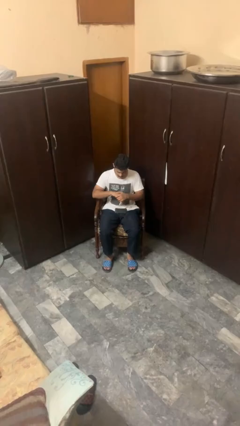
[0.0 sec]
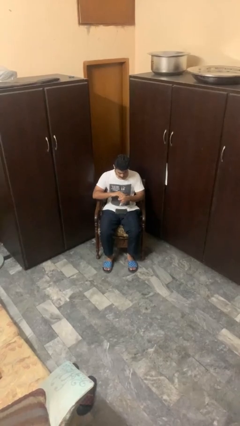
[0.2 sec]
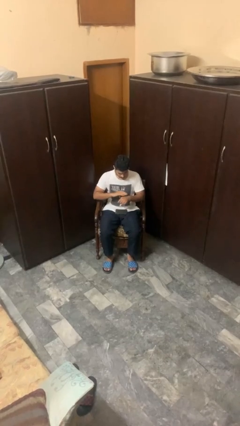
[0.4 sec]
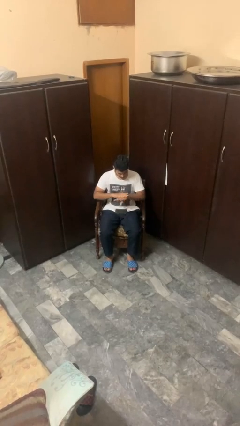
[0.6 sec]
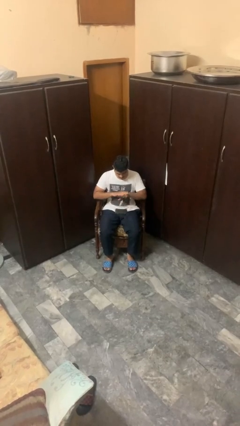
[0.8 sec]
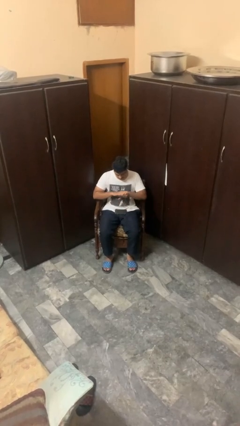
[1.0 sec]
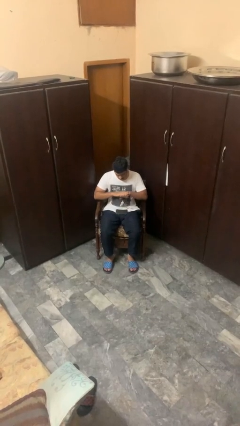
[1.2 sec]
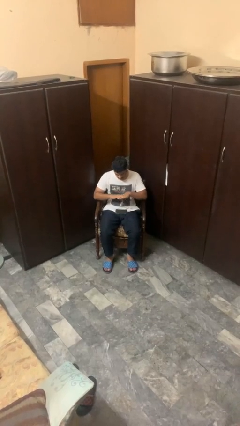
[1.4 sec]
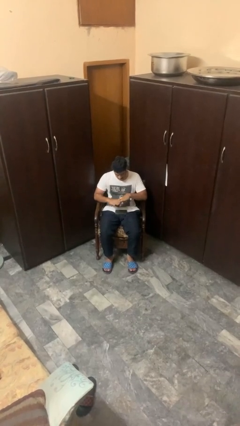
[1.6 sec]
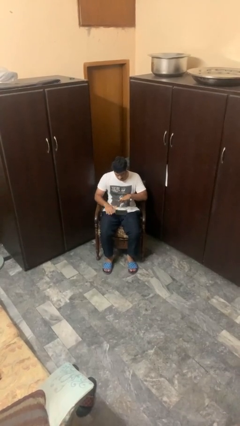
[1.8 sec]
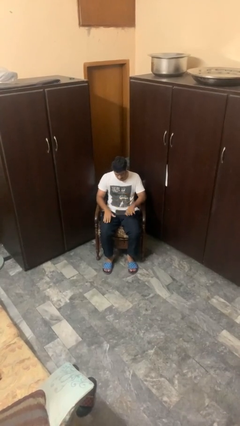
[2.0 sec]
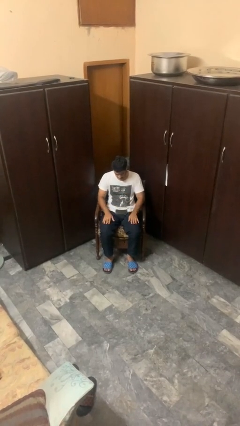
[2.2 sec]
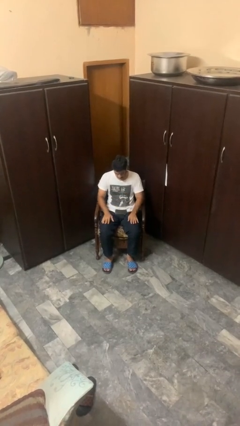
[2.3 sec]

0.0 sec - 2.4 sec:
person looks at hands in lap

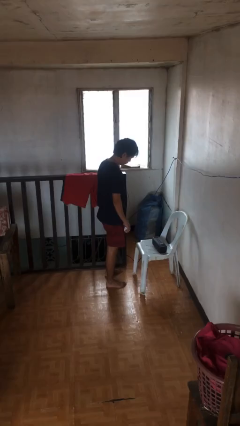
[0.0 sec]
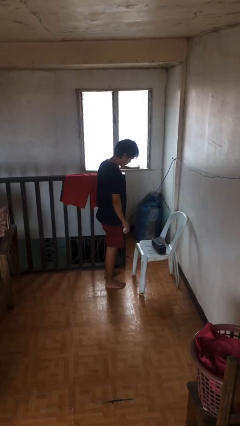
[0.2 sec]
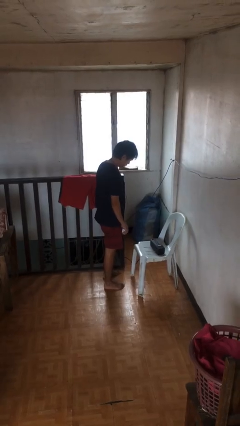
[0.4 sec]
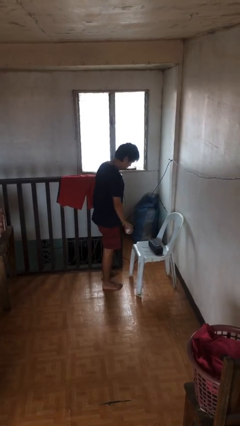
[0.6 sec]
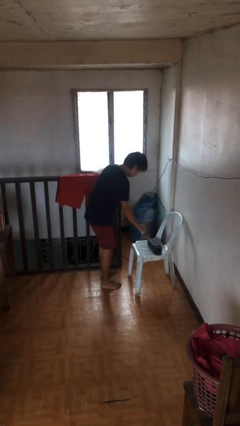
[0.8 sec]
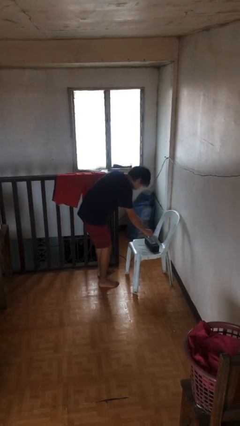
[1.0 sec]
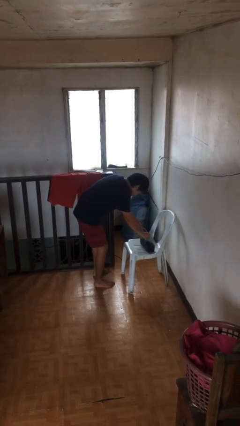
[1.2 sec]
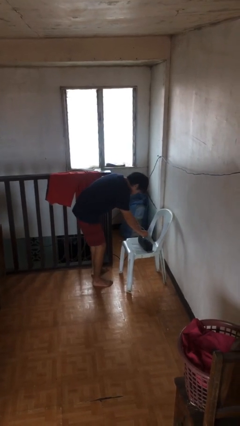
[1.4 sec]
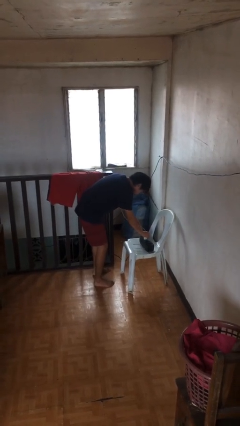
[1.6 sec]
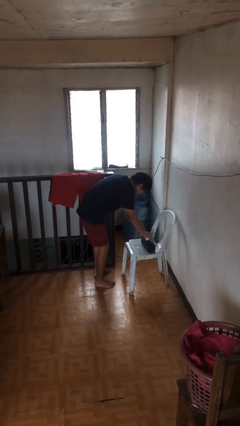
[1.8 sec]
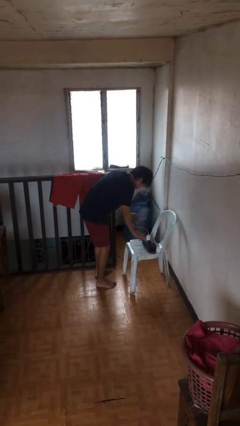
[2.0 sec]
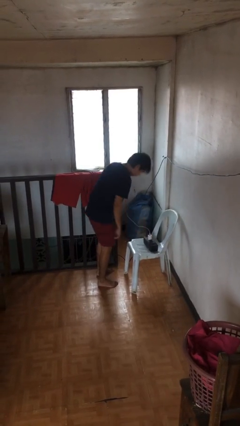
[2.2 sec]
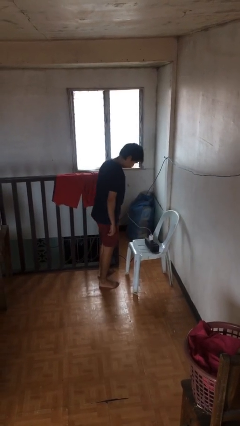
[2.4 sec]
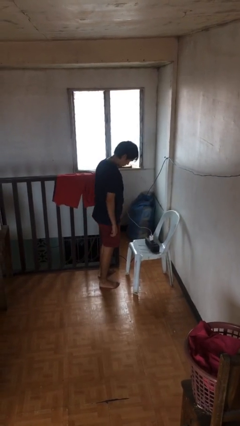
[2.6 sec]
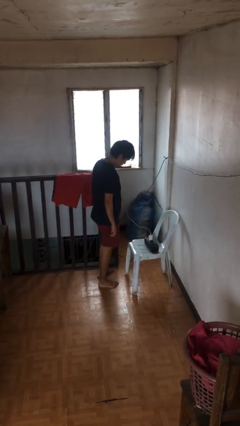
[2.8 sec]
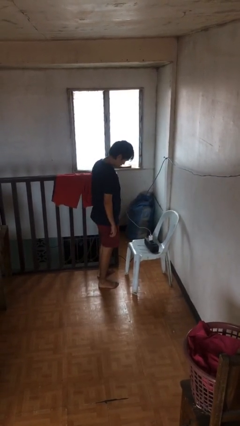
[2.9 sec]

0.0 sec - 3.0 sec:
person plugs into electrical socket

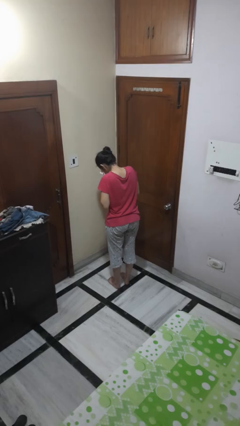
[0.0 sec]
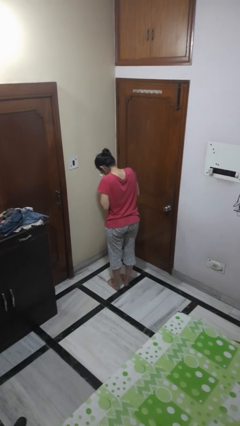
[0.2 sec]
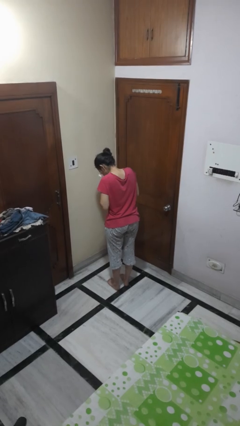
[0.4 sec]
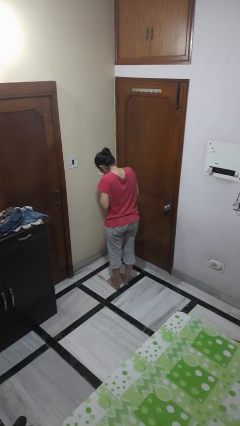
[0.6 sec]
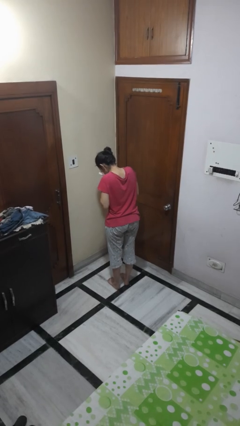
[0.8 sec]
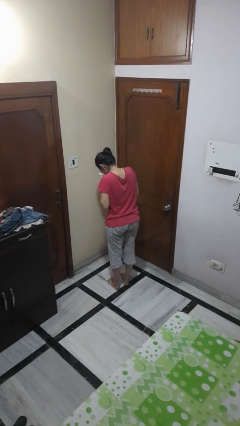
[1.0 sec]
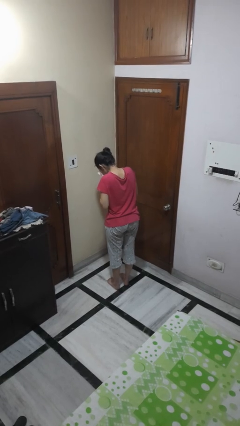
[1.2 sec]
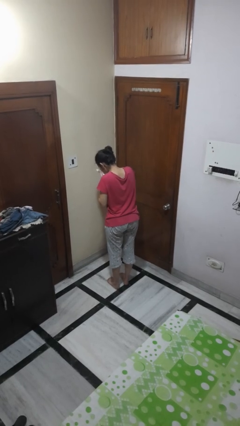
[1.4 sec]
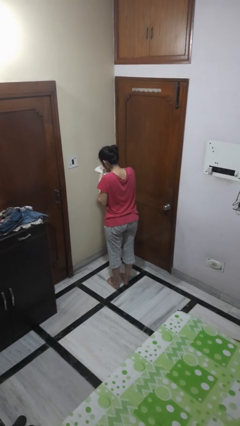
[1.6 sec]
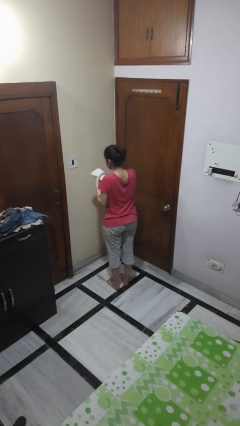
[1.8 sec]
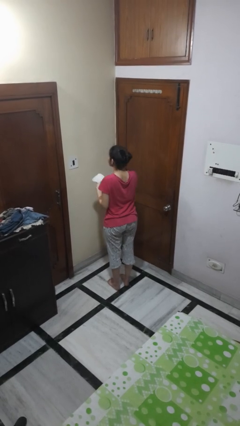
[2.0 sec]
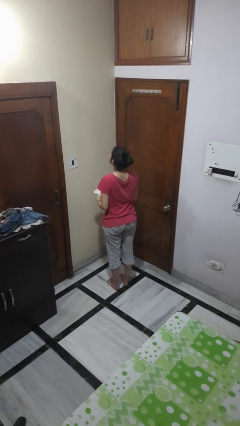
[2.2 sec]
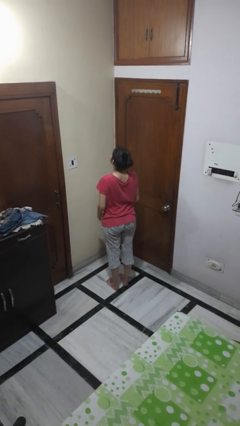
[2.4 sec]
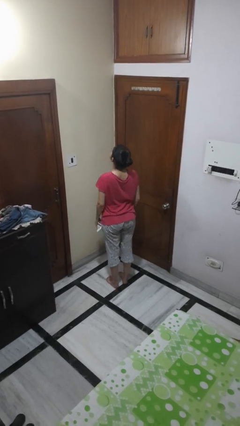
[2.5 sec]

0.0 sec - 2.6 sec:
person blows nose

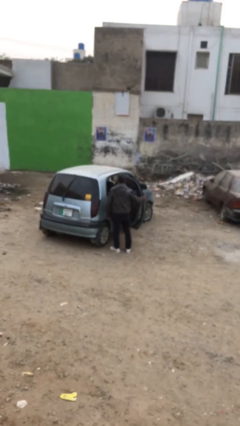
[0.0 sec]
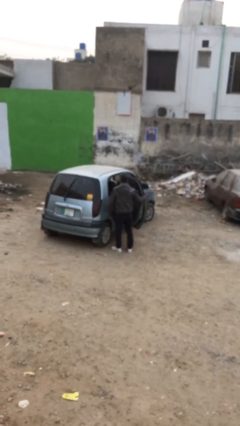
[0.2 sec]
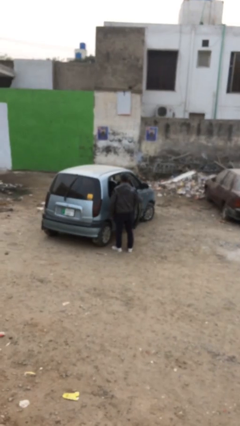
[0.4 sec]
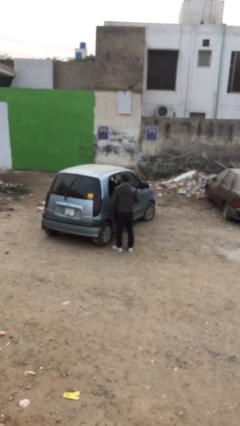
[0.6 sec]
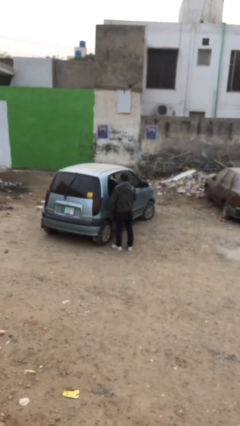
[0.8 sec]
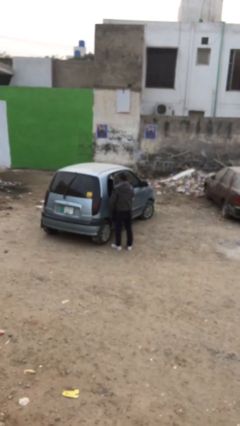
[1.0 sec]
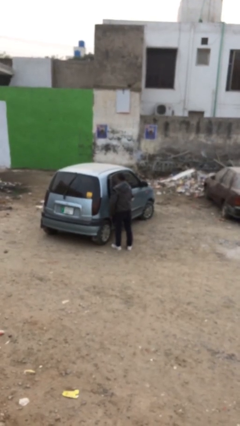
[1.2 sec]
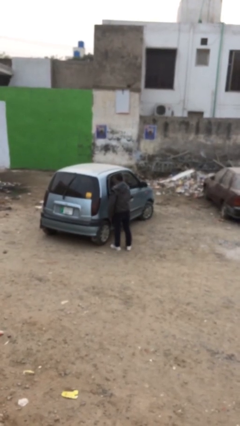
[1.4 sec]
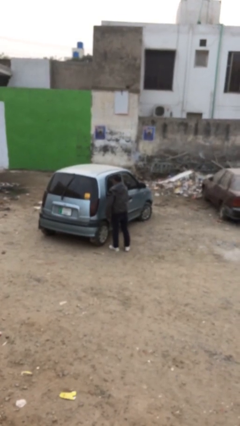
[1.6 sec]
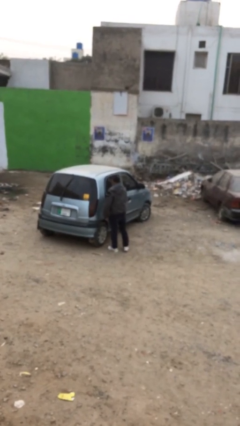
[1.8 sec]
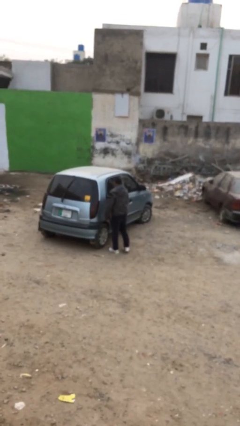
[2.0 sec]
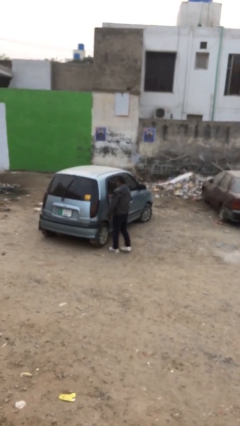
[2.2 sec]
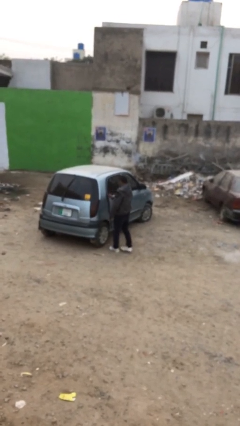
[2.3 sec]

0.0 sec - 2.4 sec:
person closes car door

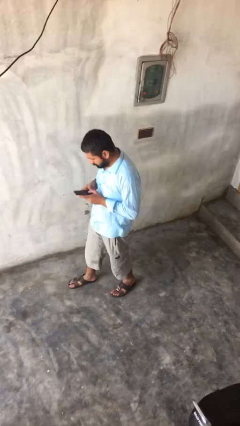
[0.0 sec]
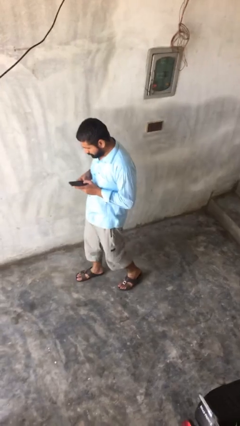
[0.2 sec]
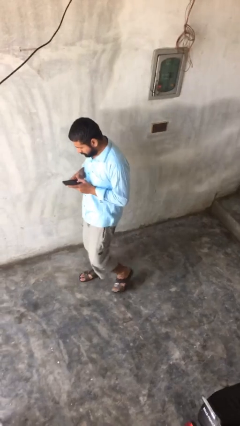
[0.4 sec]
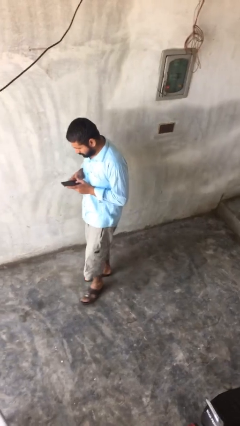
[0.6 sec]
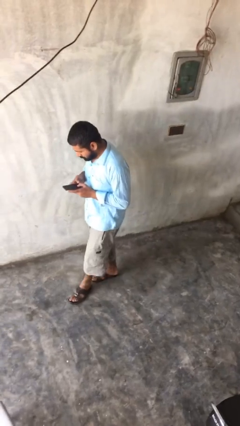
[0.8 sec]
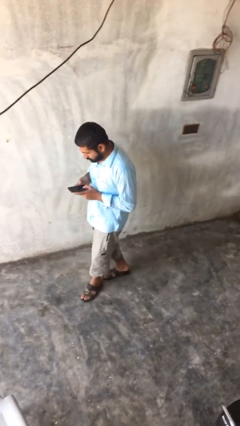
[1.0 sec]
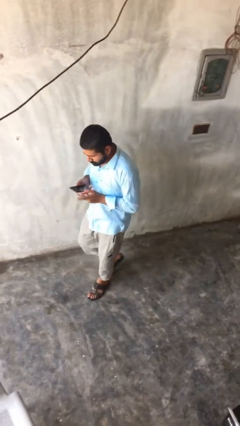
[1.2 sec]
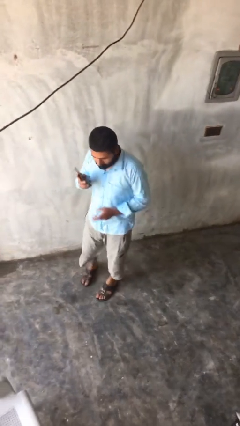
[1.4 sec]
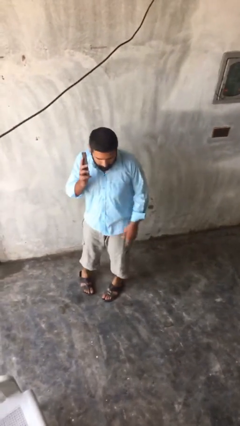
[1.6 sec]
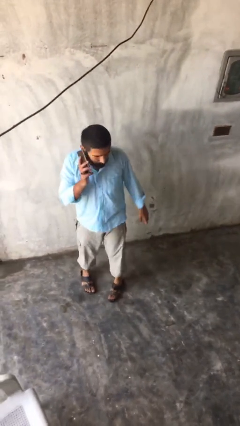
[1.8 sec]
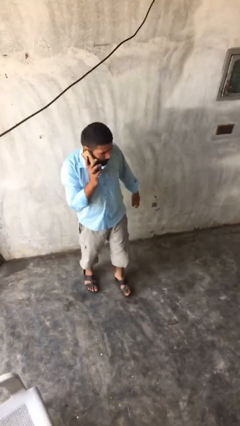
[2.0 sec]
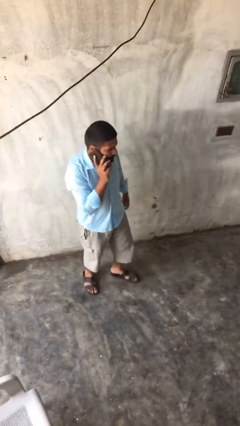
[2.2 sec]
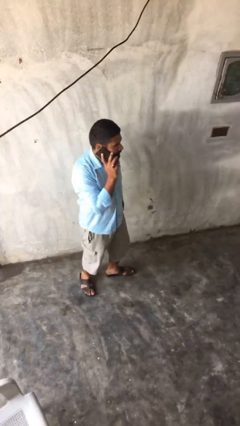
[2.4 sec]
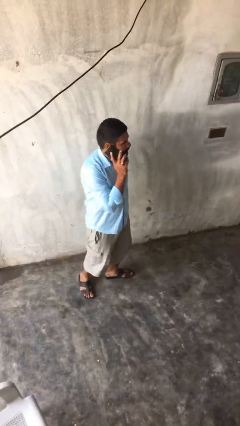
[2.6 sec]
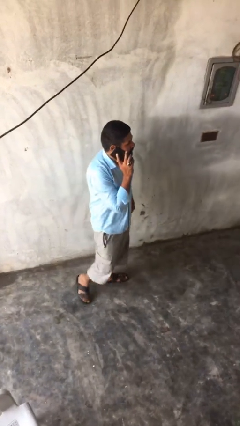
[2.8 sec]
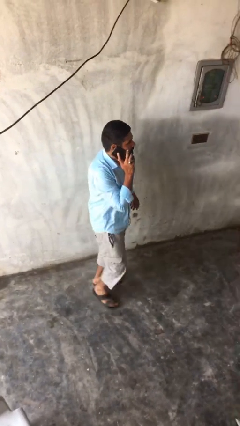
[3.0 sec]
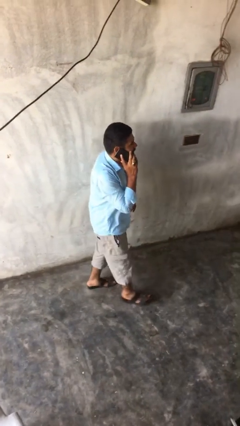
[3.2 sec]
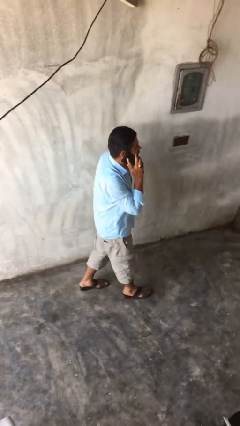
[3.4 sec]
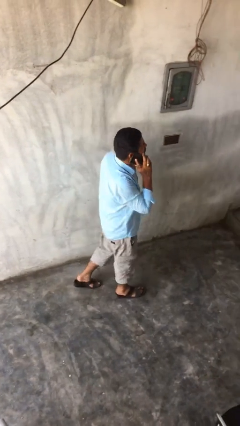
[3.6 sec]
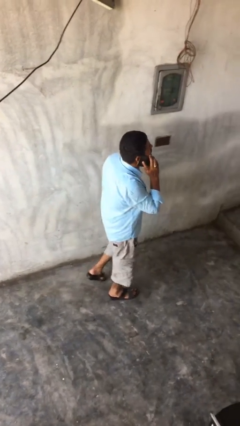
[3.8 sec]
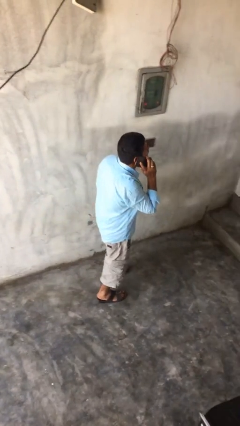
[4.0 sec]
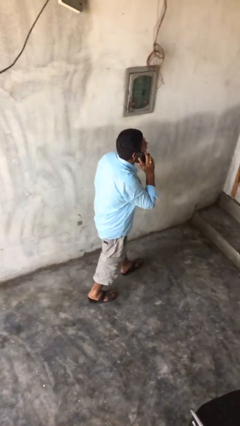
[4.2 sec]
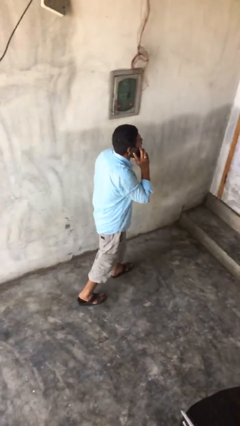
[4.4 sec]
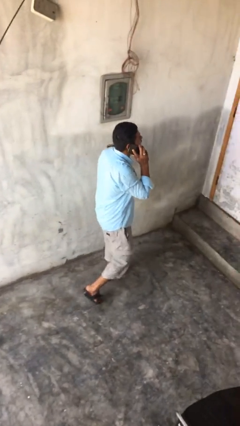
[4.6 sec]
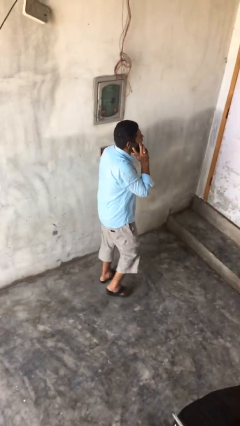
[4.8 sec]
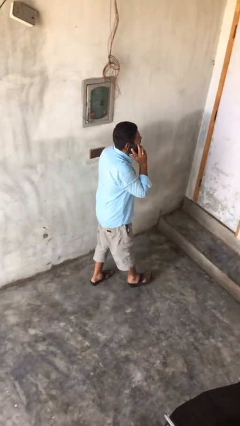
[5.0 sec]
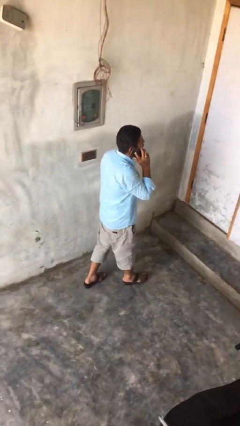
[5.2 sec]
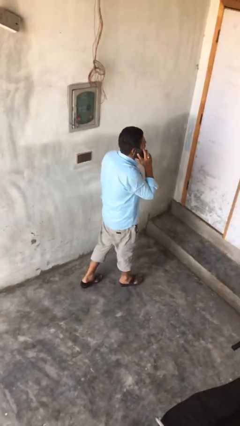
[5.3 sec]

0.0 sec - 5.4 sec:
person talks on phone

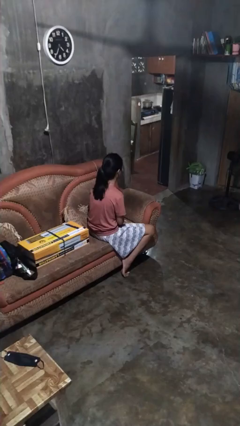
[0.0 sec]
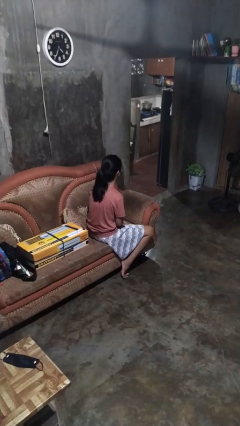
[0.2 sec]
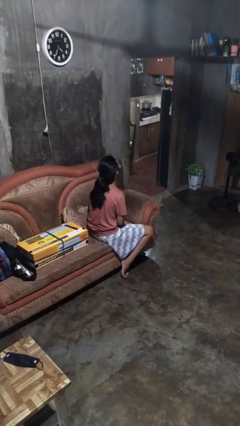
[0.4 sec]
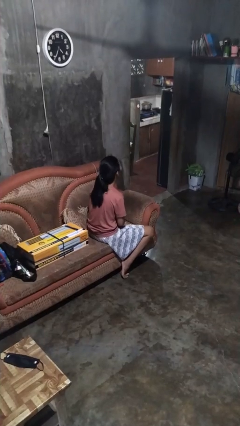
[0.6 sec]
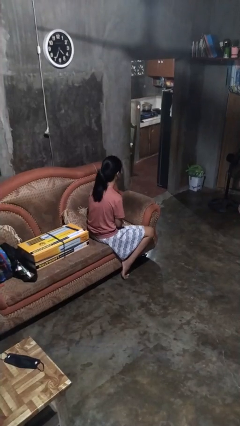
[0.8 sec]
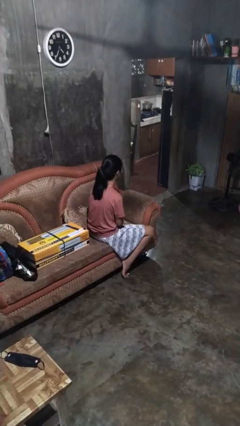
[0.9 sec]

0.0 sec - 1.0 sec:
person nods head

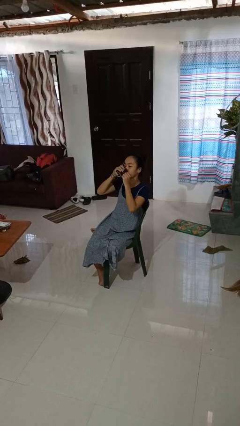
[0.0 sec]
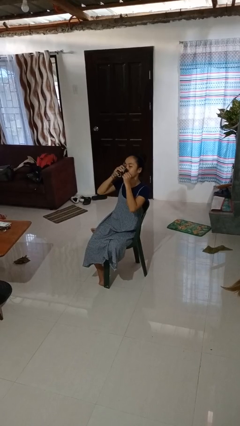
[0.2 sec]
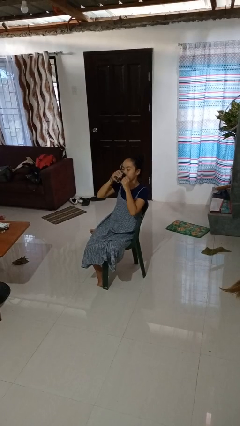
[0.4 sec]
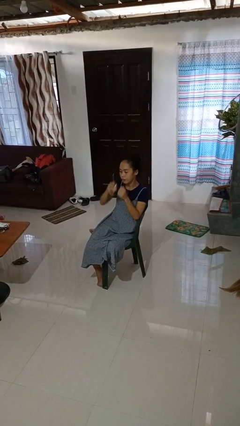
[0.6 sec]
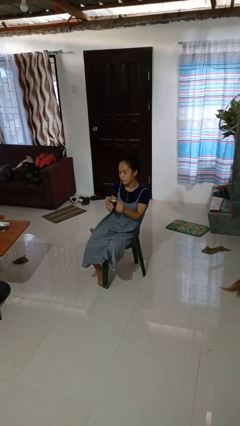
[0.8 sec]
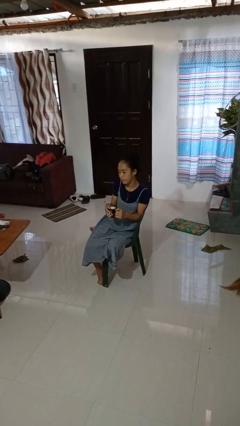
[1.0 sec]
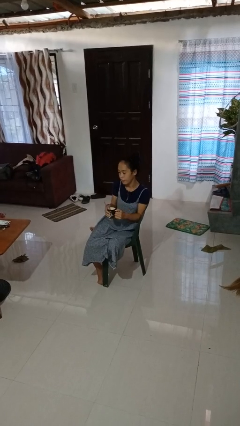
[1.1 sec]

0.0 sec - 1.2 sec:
person drinks from mug
